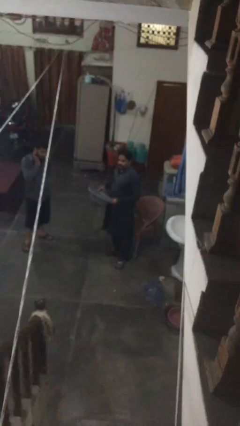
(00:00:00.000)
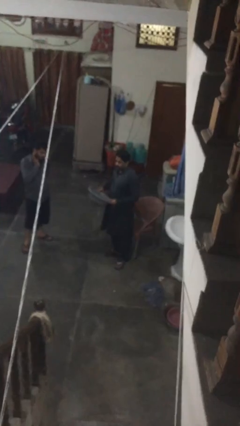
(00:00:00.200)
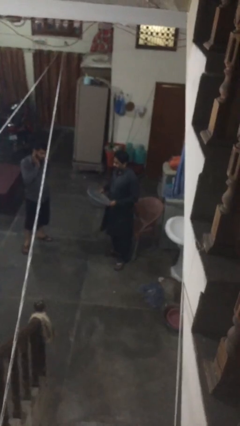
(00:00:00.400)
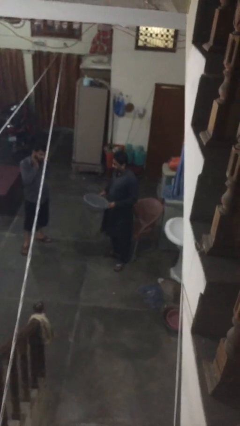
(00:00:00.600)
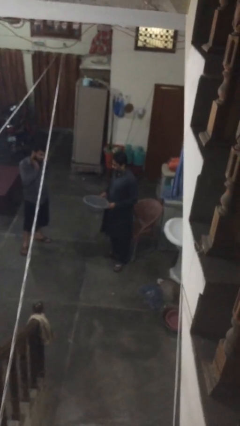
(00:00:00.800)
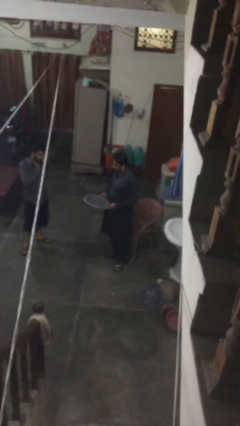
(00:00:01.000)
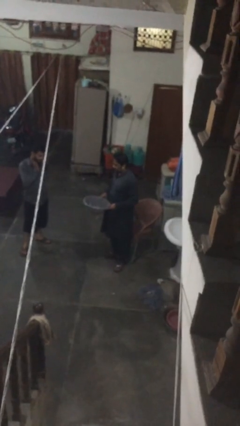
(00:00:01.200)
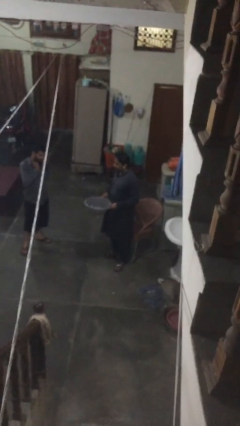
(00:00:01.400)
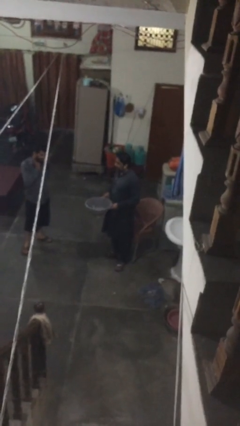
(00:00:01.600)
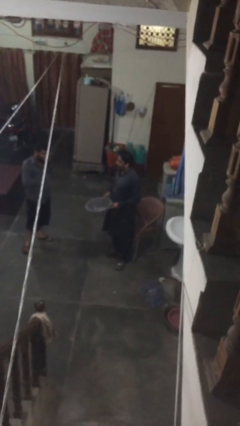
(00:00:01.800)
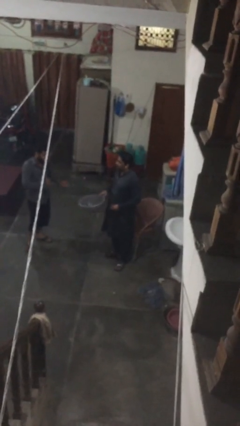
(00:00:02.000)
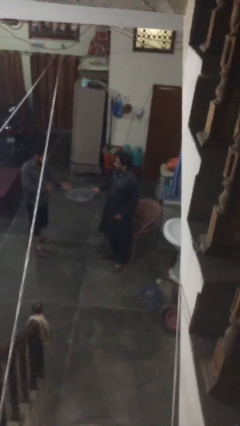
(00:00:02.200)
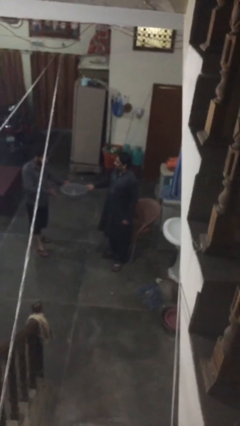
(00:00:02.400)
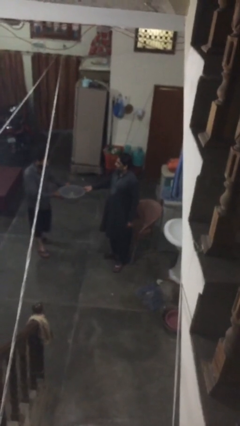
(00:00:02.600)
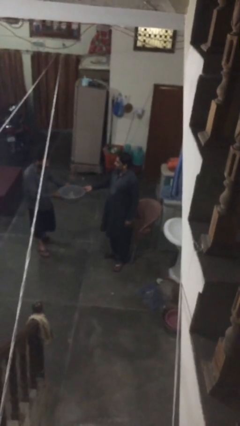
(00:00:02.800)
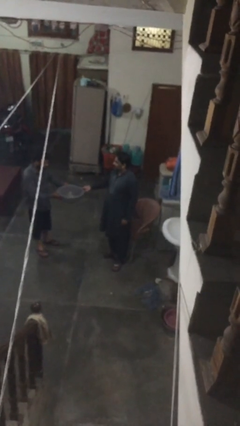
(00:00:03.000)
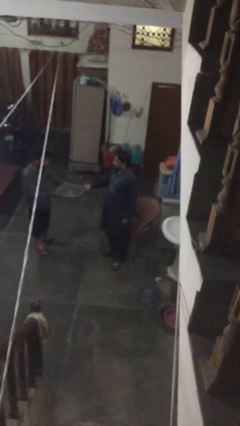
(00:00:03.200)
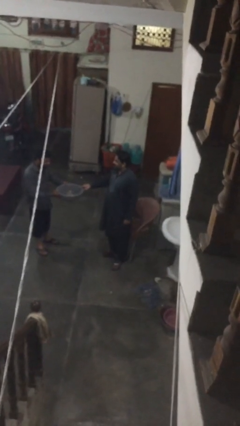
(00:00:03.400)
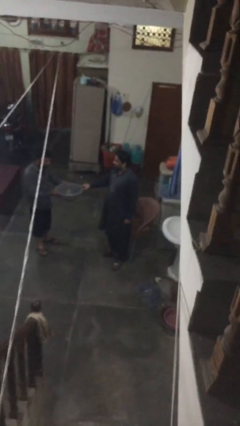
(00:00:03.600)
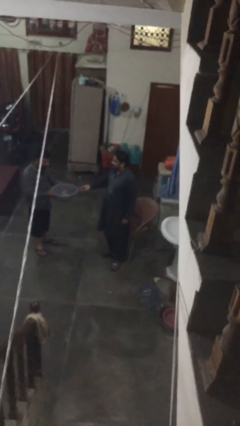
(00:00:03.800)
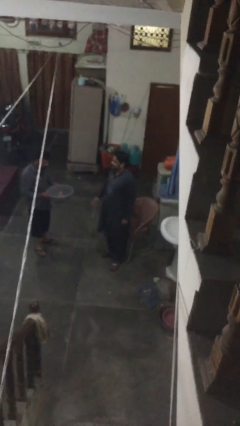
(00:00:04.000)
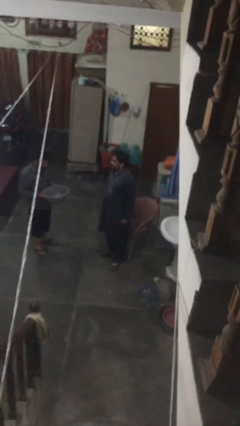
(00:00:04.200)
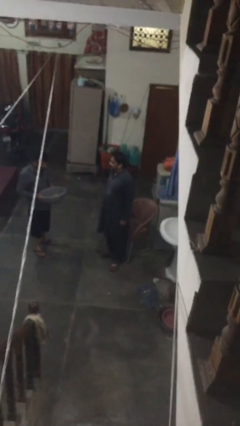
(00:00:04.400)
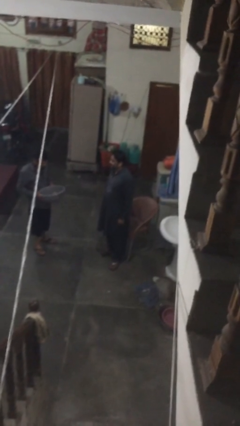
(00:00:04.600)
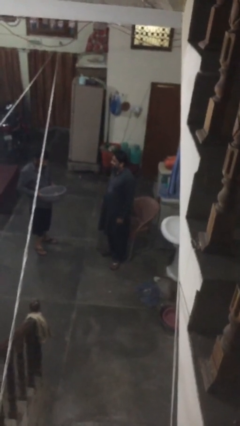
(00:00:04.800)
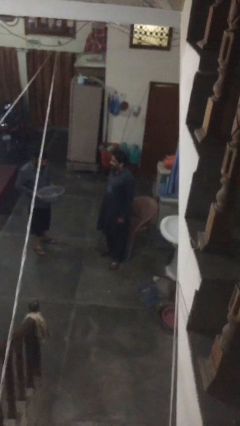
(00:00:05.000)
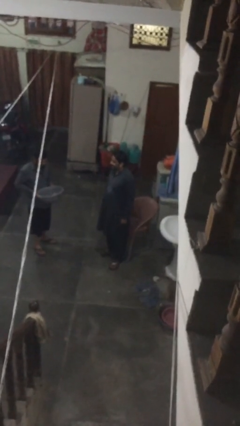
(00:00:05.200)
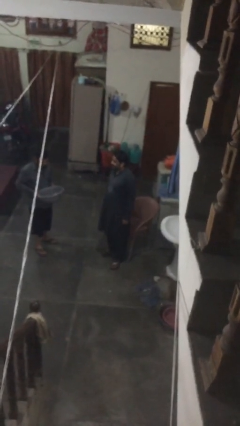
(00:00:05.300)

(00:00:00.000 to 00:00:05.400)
person transfers object to person

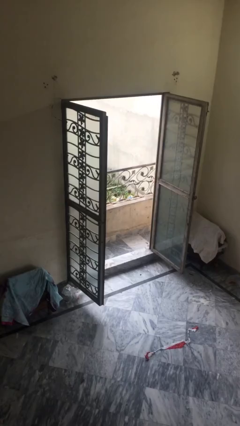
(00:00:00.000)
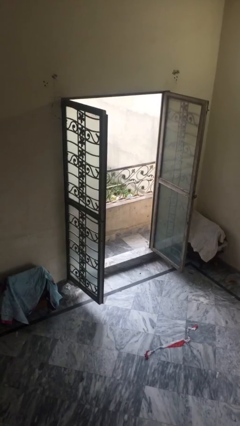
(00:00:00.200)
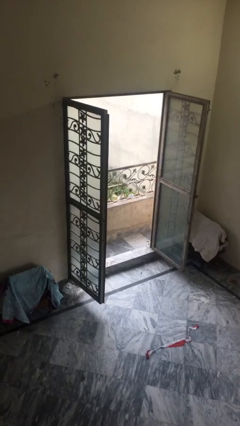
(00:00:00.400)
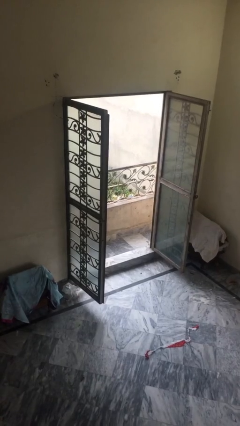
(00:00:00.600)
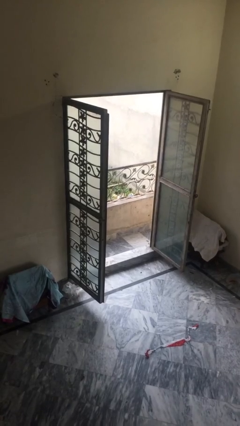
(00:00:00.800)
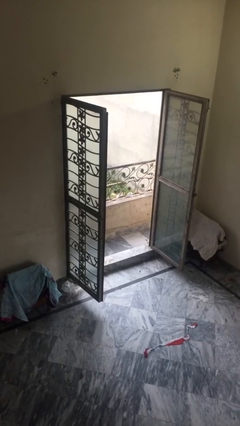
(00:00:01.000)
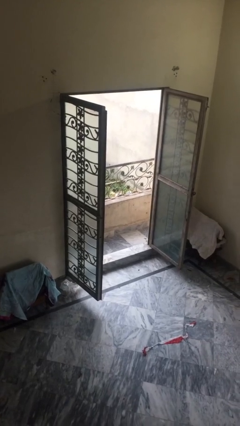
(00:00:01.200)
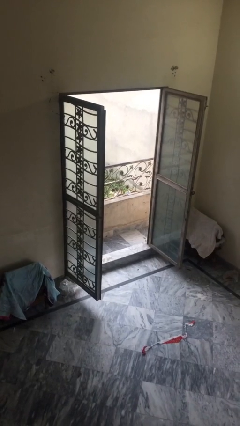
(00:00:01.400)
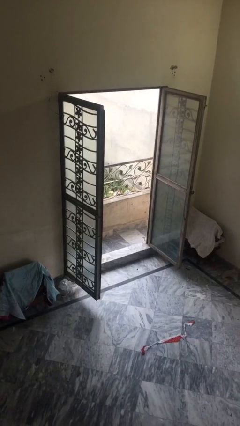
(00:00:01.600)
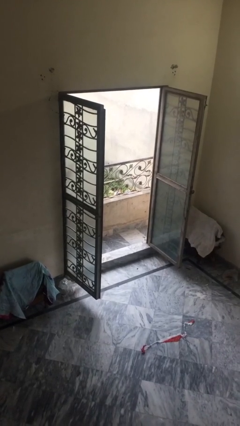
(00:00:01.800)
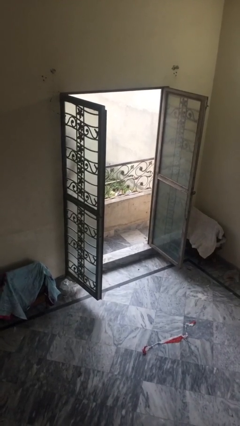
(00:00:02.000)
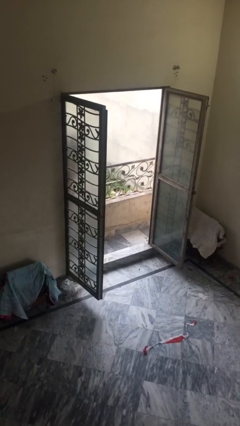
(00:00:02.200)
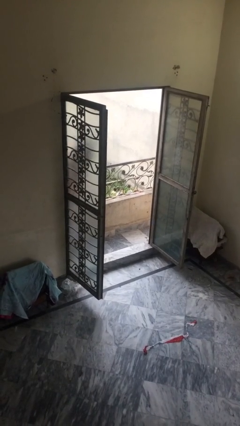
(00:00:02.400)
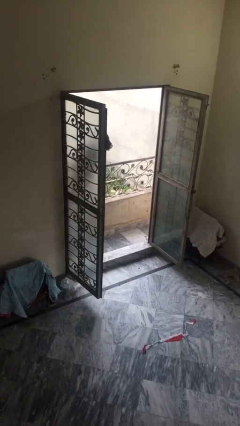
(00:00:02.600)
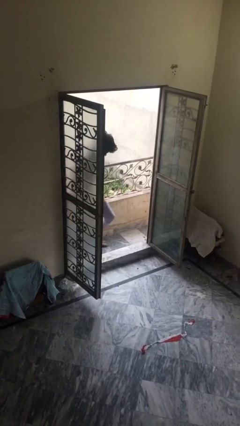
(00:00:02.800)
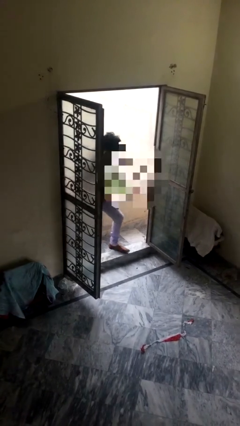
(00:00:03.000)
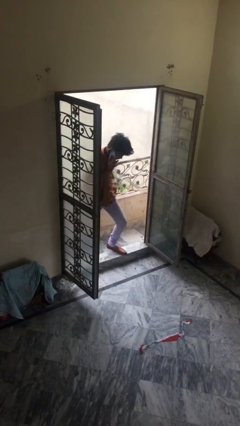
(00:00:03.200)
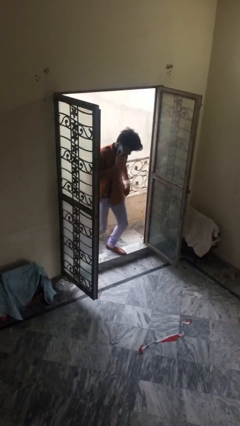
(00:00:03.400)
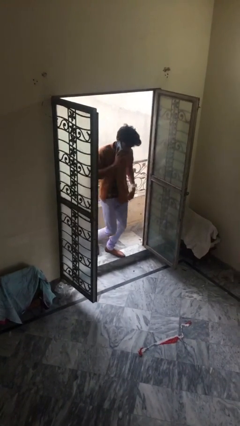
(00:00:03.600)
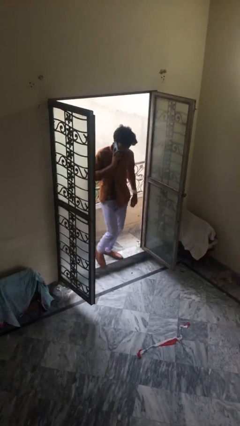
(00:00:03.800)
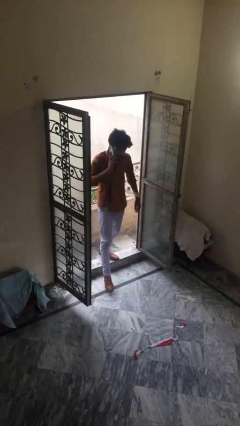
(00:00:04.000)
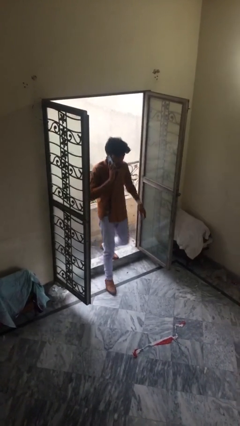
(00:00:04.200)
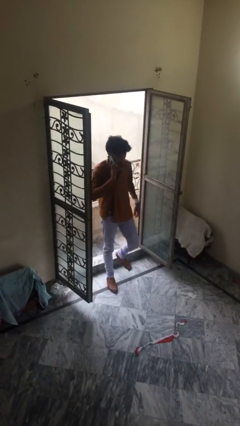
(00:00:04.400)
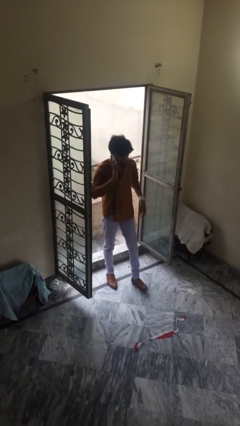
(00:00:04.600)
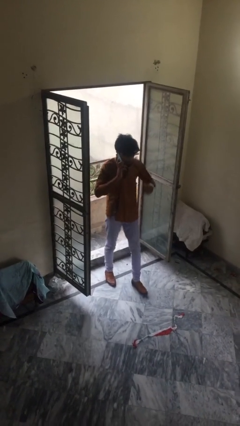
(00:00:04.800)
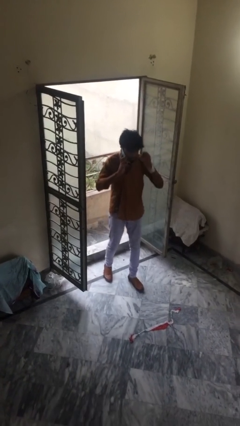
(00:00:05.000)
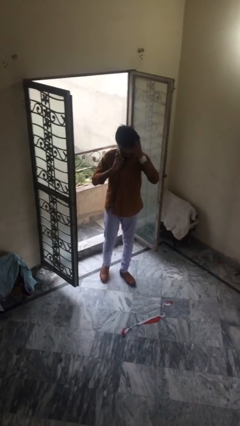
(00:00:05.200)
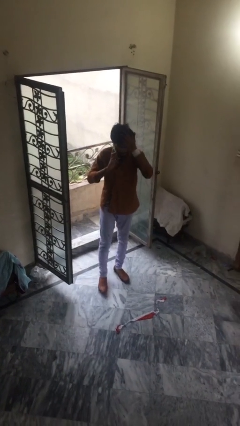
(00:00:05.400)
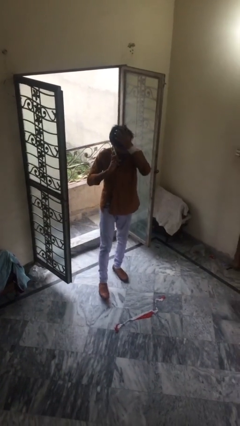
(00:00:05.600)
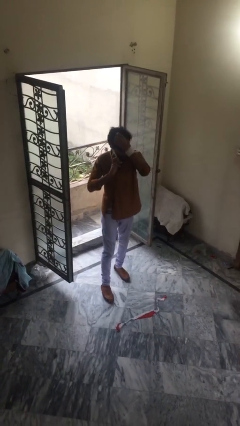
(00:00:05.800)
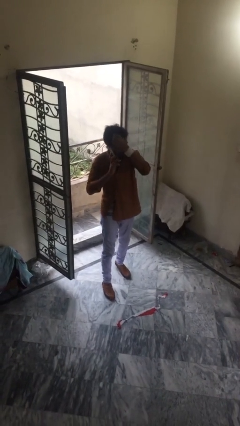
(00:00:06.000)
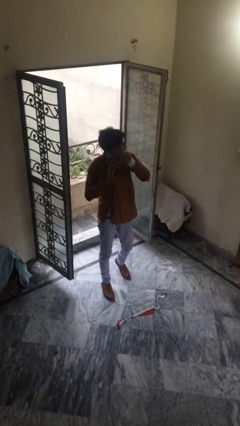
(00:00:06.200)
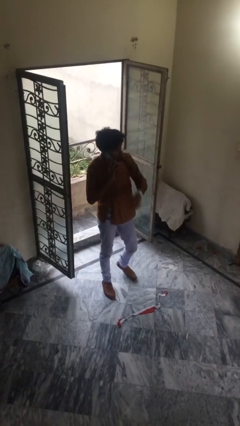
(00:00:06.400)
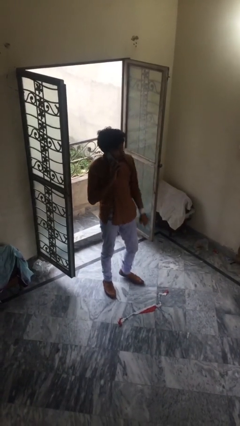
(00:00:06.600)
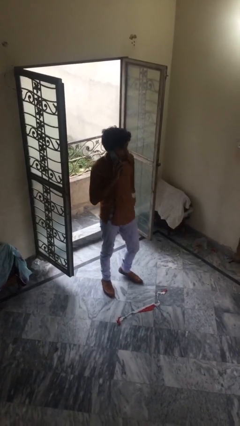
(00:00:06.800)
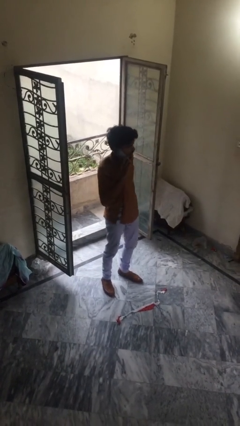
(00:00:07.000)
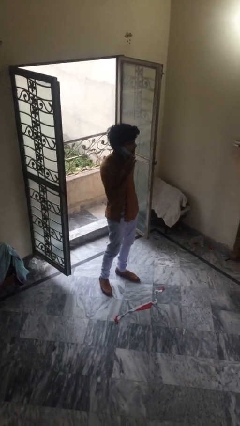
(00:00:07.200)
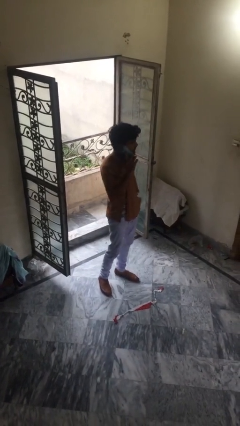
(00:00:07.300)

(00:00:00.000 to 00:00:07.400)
person enters scene through structure

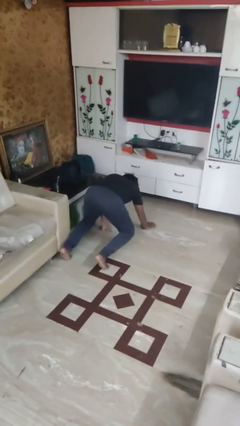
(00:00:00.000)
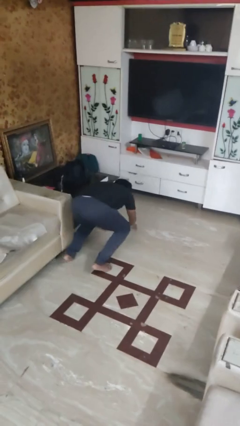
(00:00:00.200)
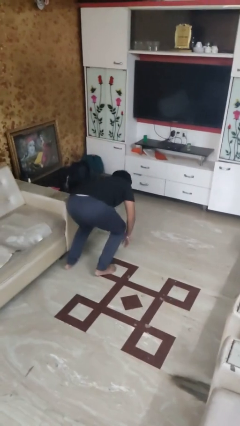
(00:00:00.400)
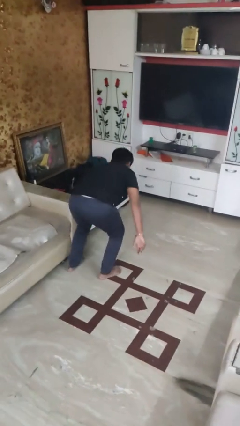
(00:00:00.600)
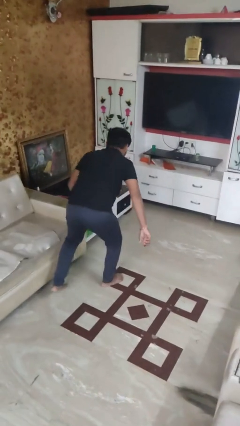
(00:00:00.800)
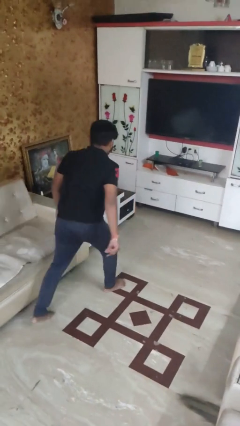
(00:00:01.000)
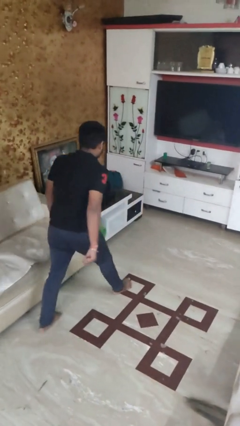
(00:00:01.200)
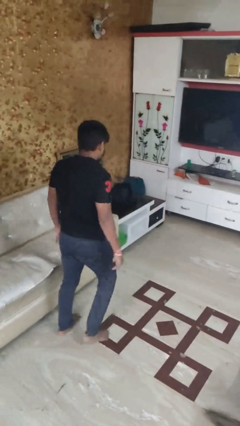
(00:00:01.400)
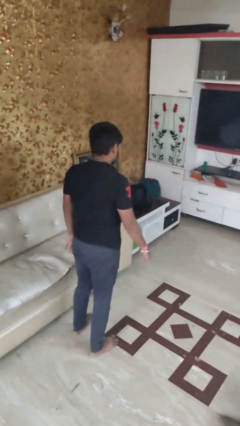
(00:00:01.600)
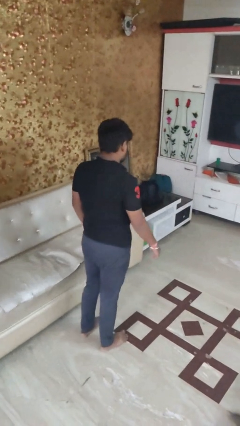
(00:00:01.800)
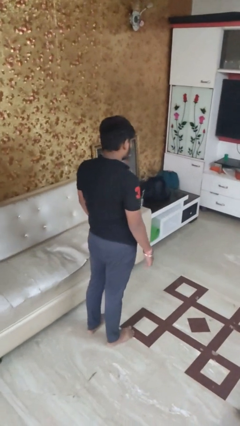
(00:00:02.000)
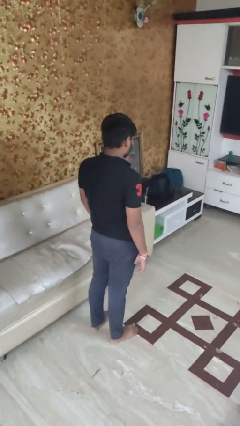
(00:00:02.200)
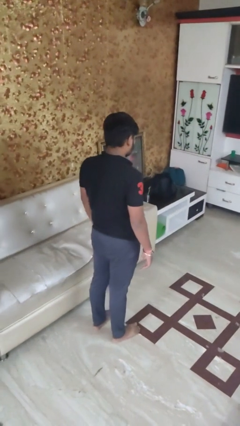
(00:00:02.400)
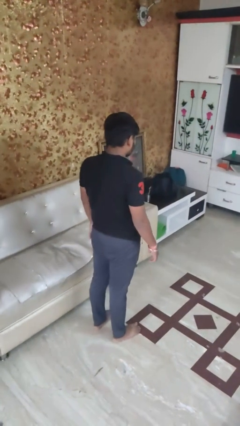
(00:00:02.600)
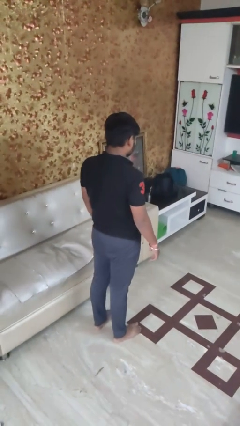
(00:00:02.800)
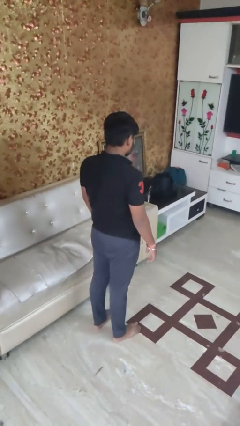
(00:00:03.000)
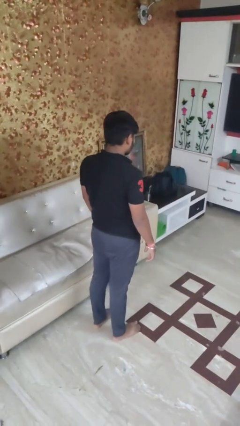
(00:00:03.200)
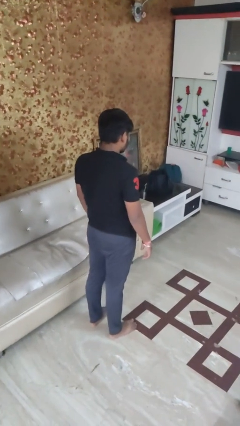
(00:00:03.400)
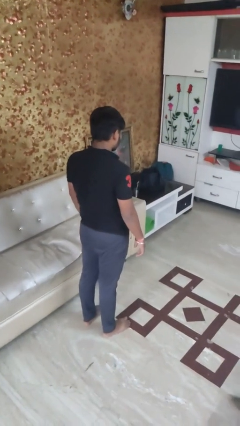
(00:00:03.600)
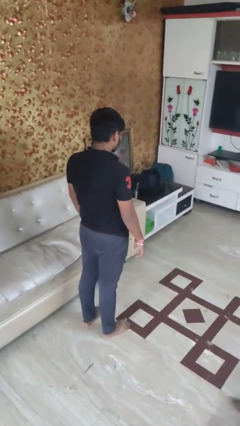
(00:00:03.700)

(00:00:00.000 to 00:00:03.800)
person stands up from floor

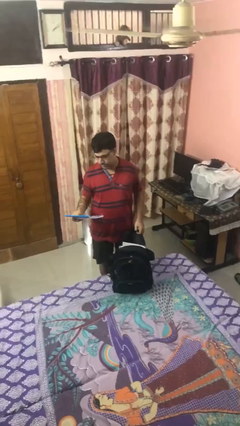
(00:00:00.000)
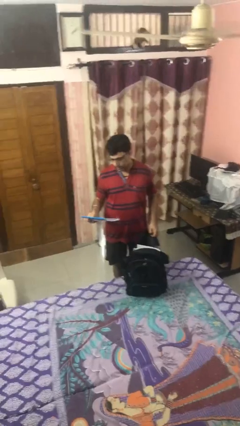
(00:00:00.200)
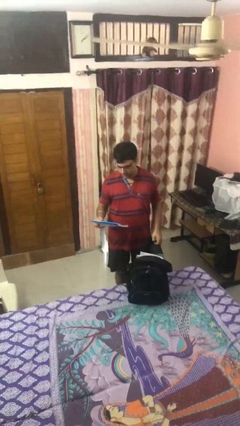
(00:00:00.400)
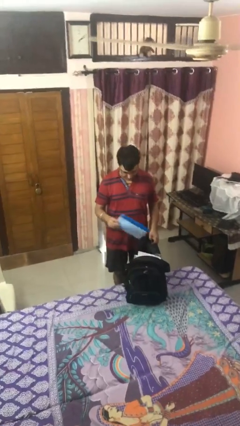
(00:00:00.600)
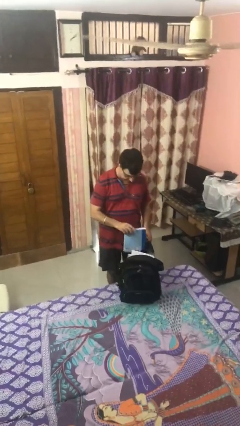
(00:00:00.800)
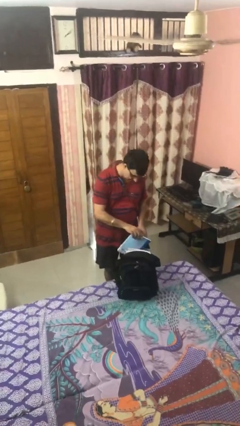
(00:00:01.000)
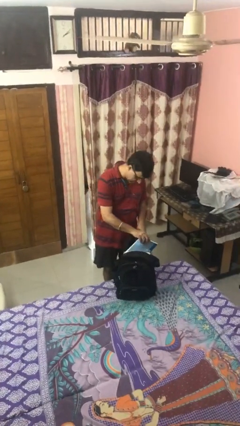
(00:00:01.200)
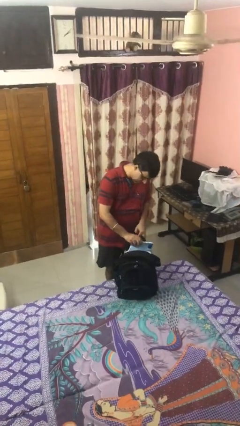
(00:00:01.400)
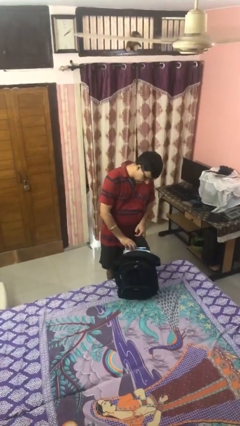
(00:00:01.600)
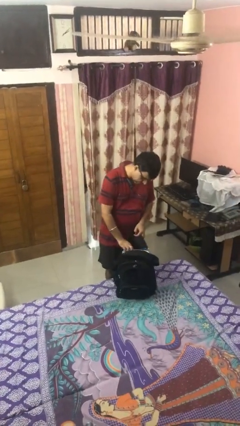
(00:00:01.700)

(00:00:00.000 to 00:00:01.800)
person puts object into backpack
